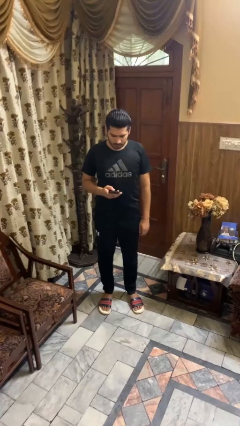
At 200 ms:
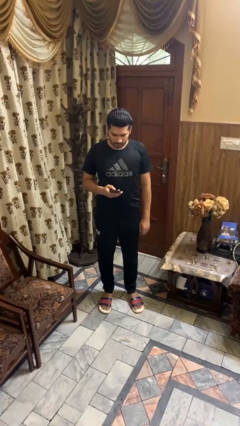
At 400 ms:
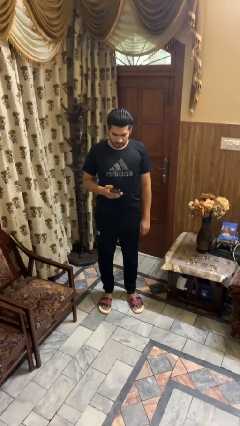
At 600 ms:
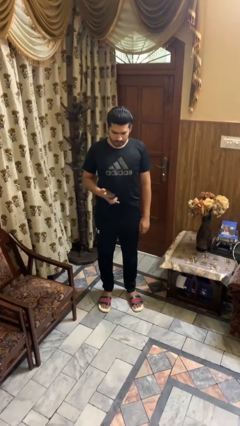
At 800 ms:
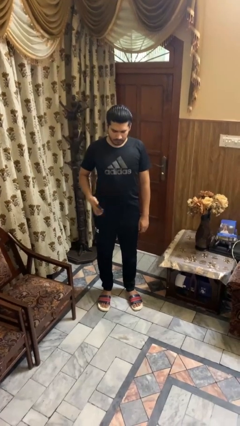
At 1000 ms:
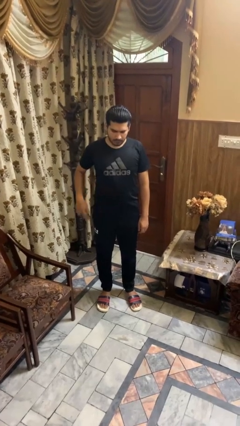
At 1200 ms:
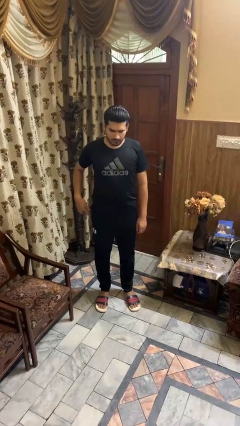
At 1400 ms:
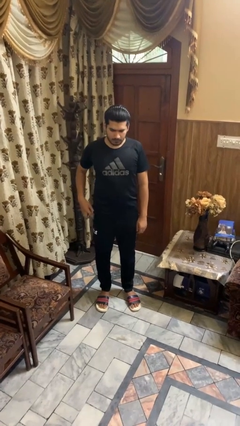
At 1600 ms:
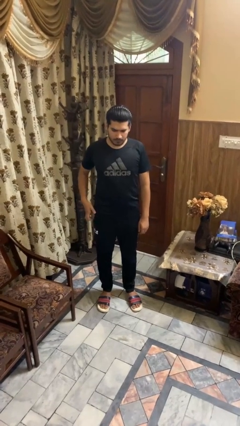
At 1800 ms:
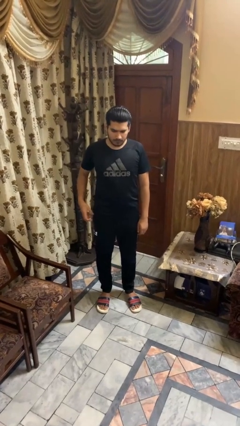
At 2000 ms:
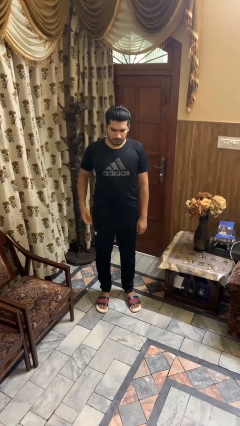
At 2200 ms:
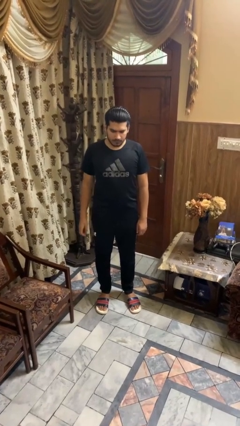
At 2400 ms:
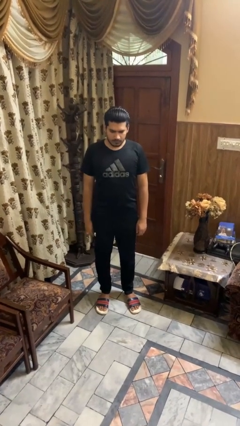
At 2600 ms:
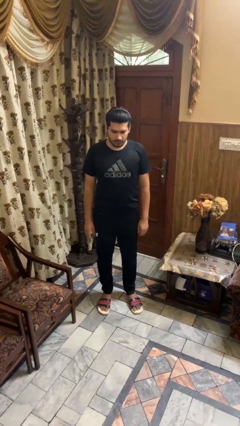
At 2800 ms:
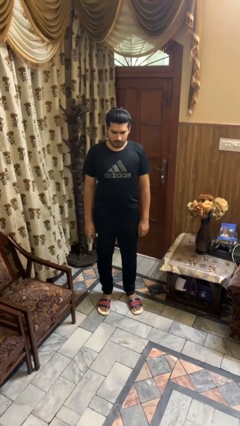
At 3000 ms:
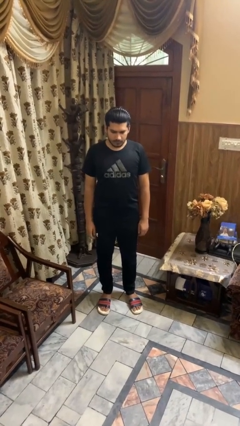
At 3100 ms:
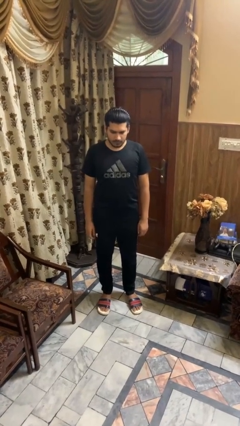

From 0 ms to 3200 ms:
person puts phone into pocket

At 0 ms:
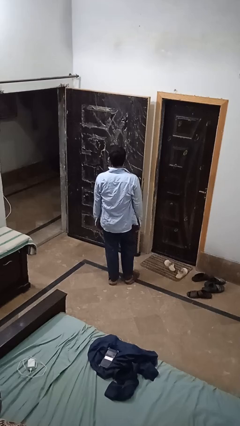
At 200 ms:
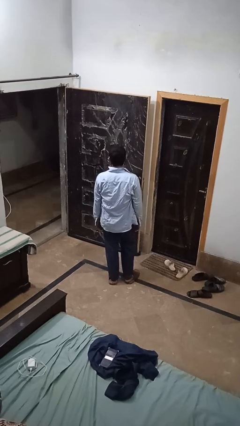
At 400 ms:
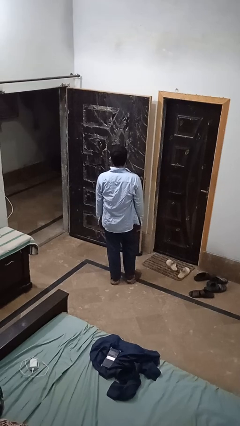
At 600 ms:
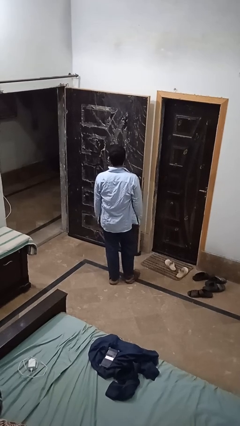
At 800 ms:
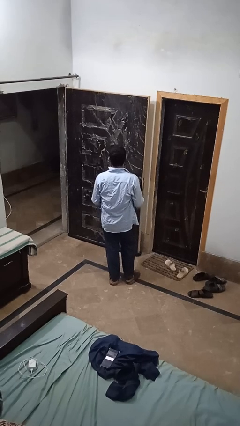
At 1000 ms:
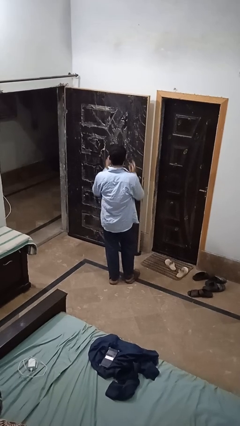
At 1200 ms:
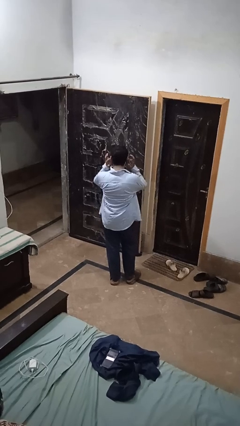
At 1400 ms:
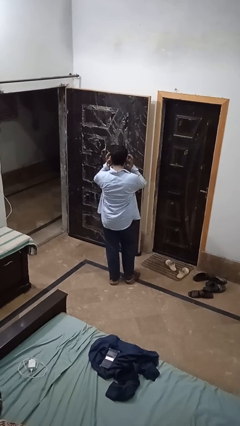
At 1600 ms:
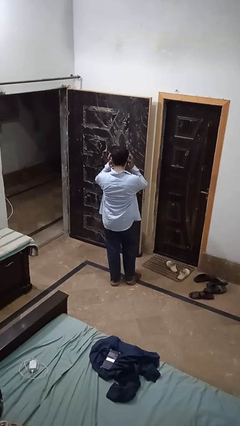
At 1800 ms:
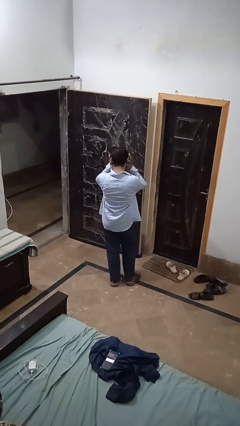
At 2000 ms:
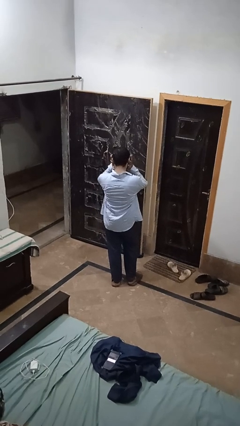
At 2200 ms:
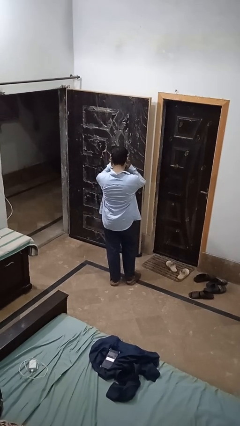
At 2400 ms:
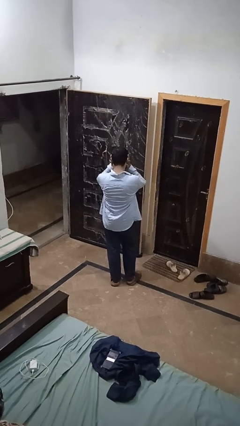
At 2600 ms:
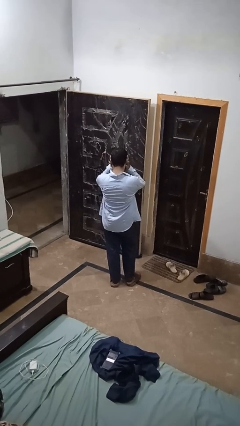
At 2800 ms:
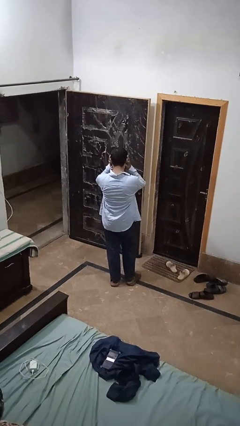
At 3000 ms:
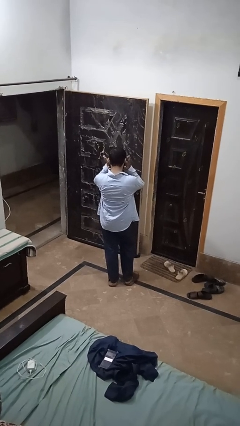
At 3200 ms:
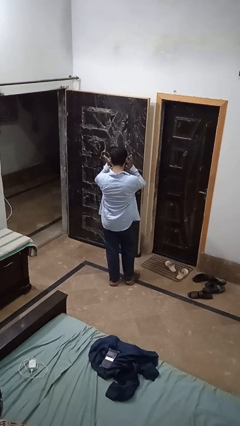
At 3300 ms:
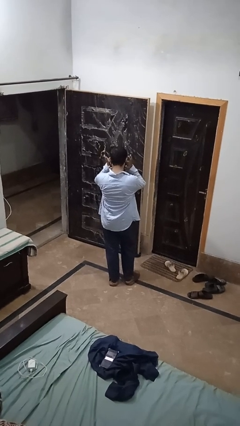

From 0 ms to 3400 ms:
person puts fingers in ear

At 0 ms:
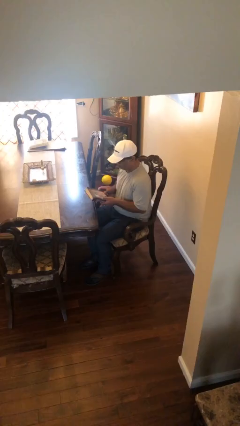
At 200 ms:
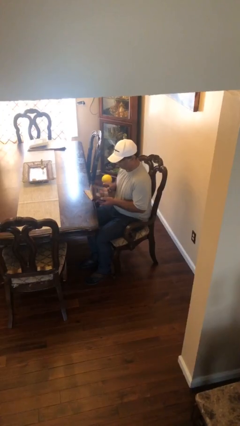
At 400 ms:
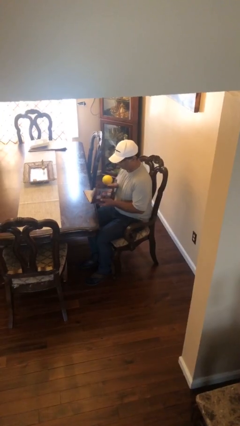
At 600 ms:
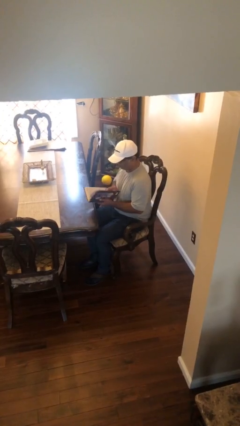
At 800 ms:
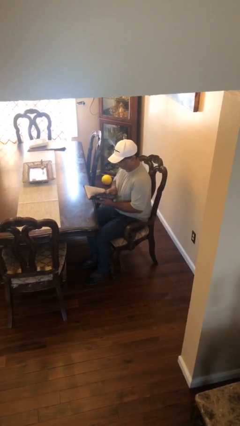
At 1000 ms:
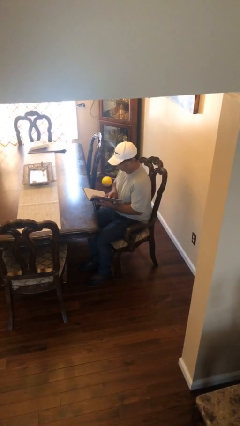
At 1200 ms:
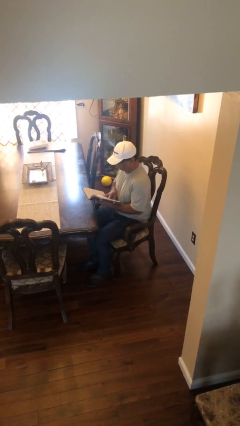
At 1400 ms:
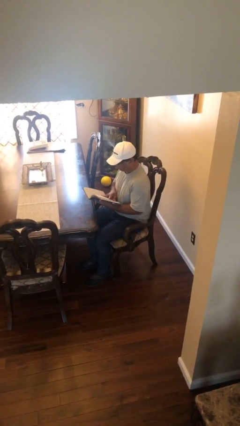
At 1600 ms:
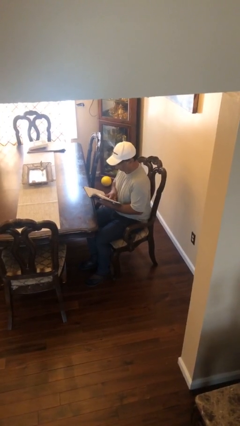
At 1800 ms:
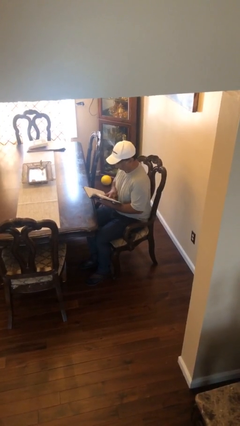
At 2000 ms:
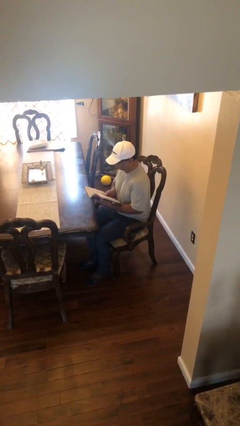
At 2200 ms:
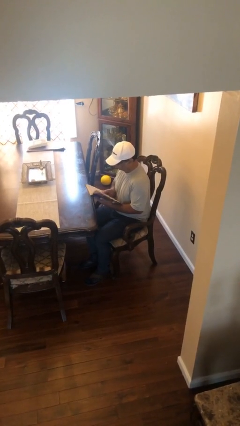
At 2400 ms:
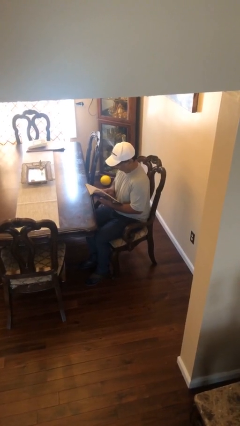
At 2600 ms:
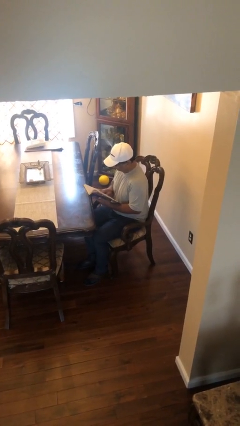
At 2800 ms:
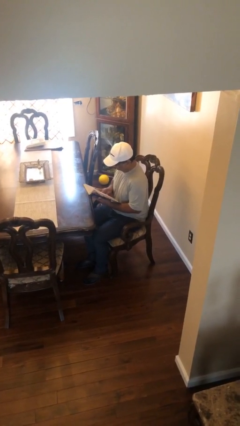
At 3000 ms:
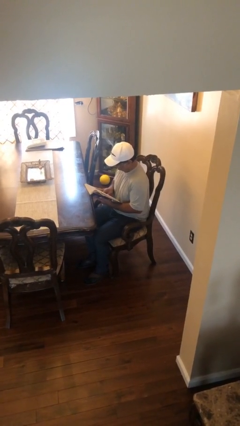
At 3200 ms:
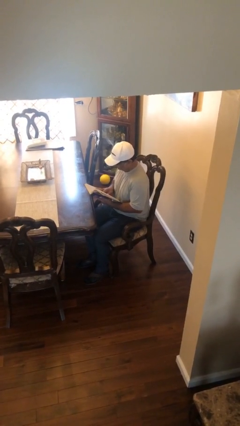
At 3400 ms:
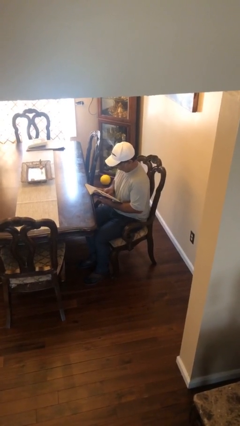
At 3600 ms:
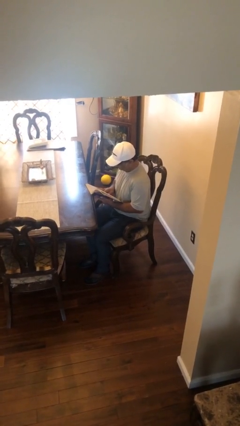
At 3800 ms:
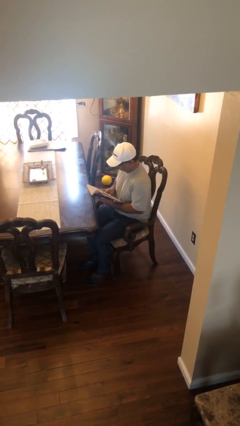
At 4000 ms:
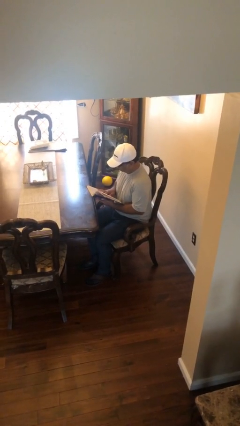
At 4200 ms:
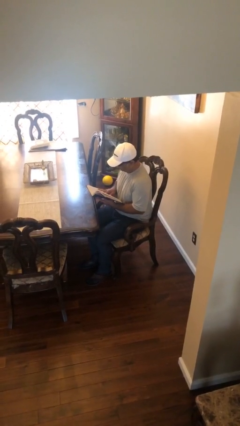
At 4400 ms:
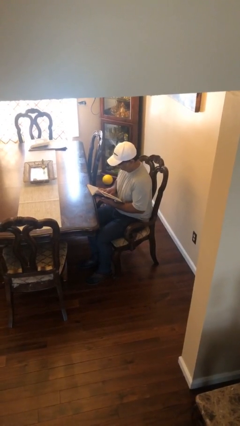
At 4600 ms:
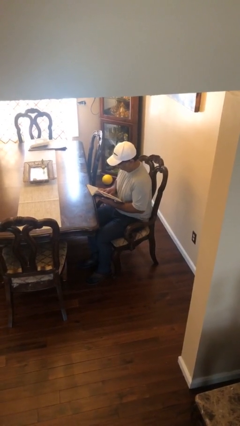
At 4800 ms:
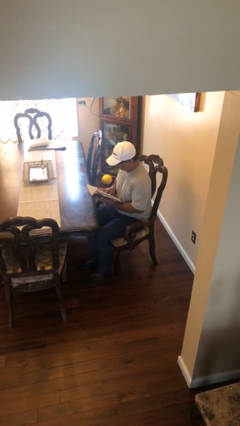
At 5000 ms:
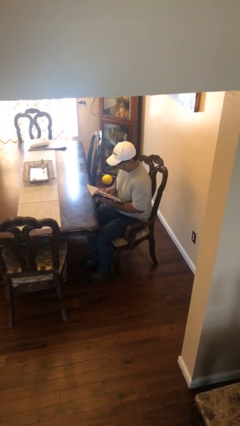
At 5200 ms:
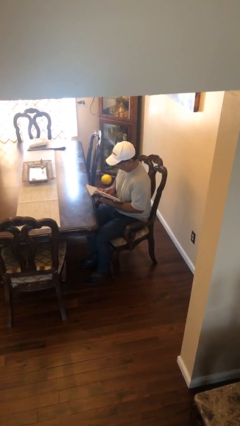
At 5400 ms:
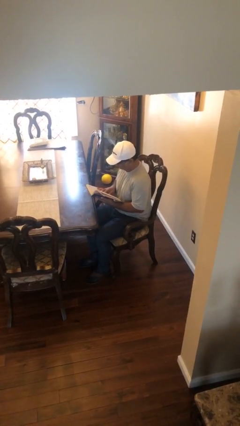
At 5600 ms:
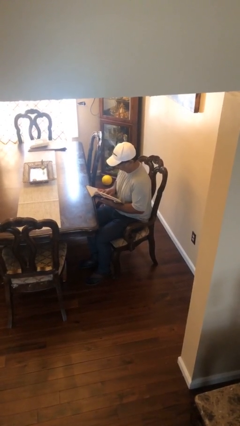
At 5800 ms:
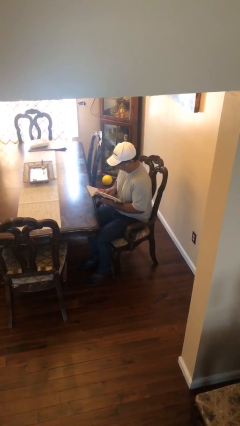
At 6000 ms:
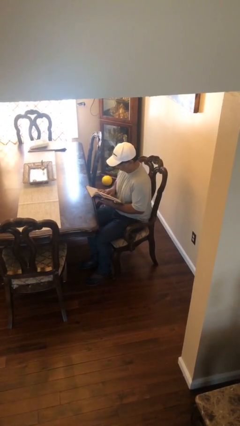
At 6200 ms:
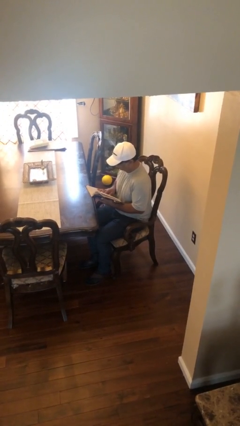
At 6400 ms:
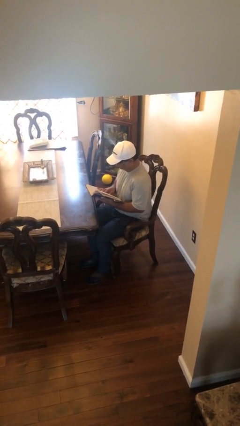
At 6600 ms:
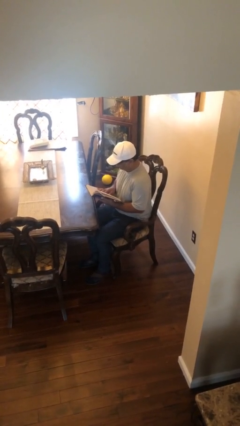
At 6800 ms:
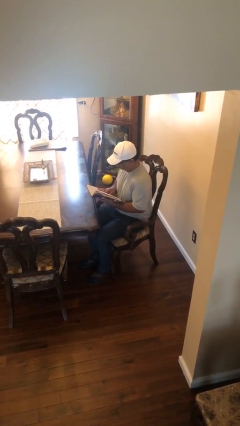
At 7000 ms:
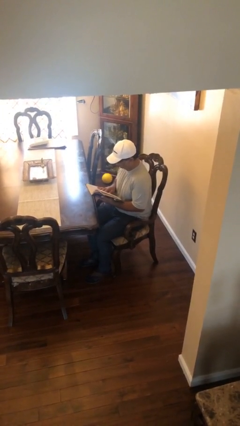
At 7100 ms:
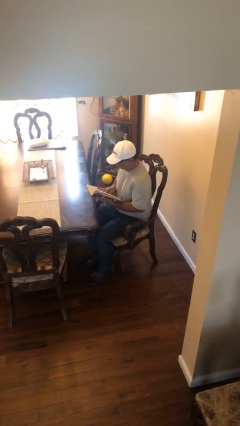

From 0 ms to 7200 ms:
person reads document

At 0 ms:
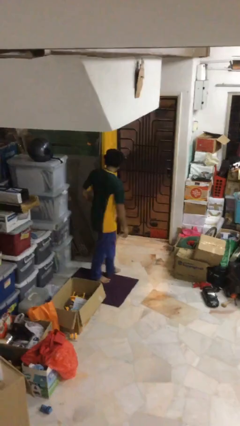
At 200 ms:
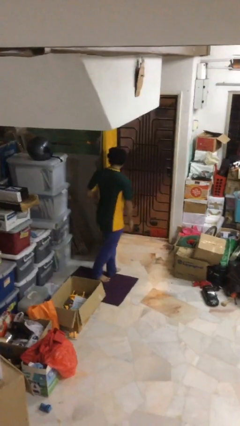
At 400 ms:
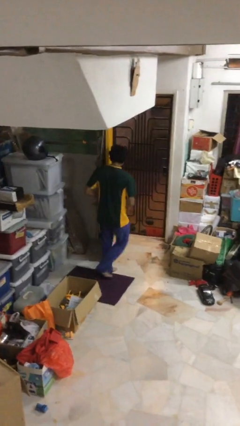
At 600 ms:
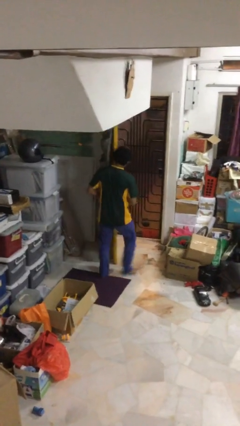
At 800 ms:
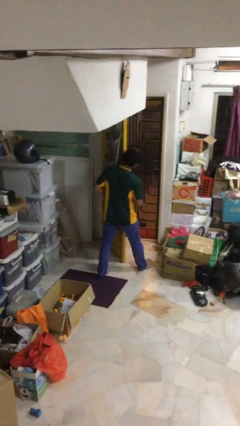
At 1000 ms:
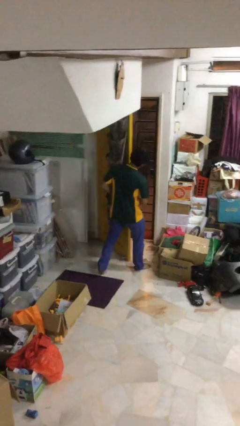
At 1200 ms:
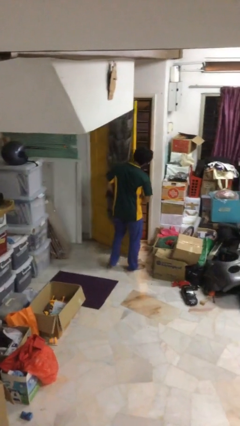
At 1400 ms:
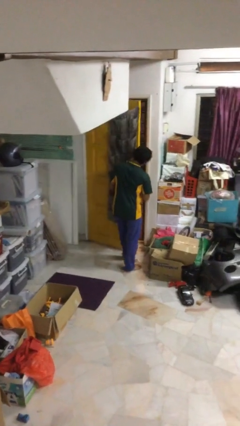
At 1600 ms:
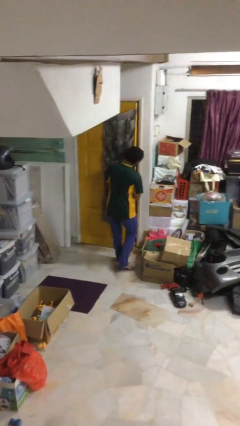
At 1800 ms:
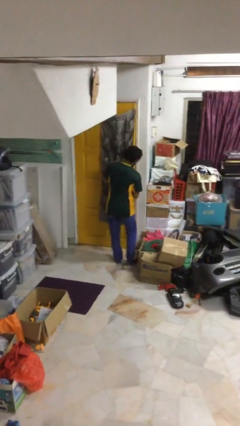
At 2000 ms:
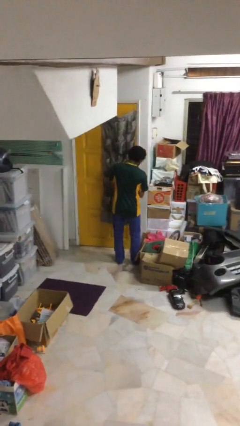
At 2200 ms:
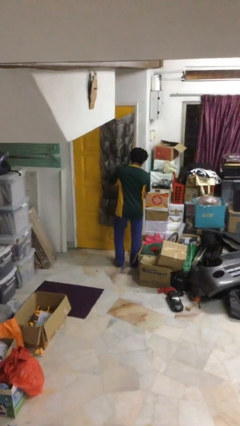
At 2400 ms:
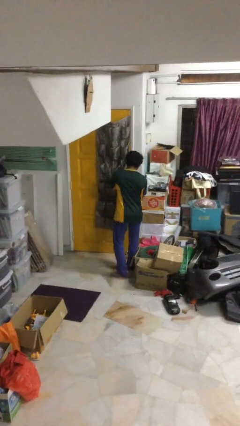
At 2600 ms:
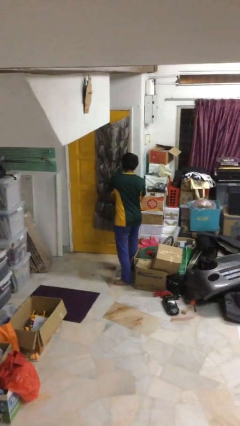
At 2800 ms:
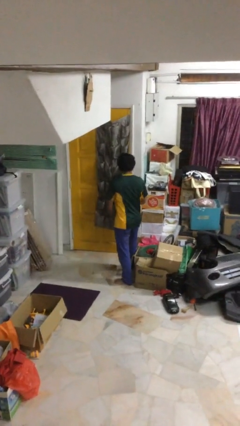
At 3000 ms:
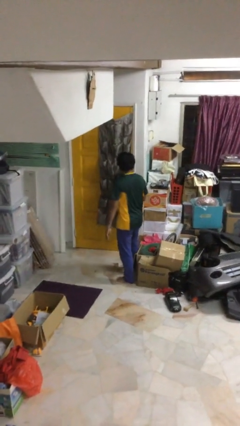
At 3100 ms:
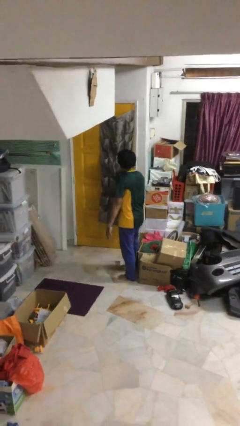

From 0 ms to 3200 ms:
person closes facility door

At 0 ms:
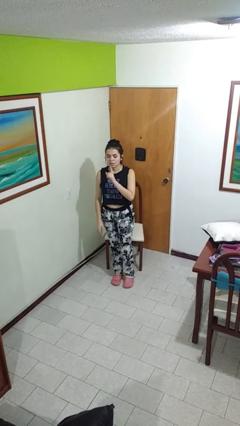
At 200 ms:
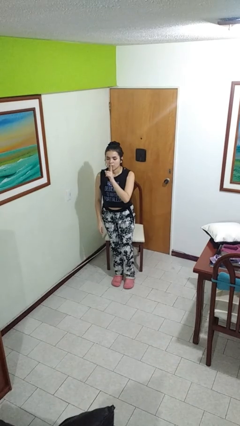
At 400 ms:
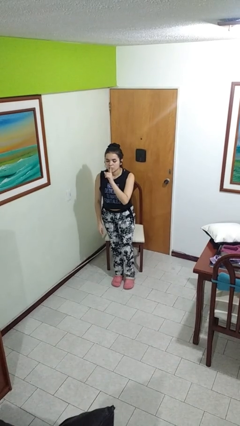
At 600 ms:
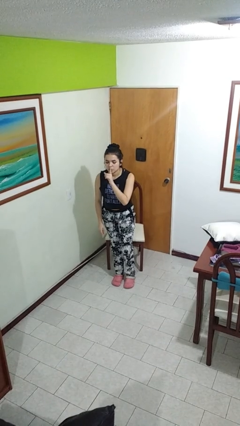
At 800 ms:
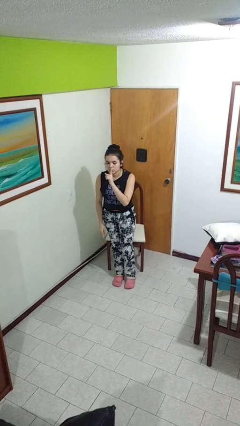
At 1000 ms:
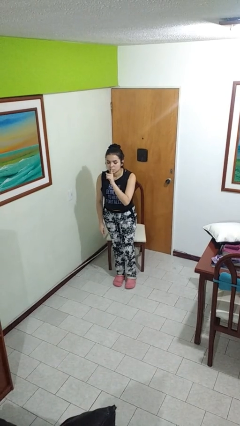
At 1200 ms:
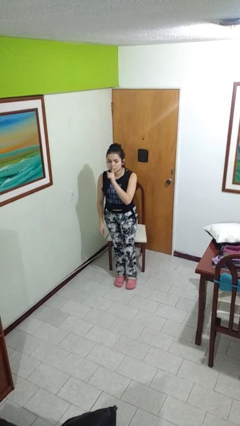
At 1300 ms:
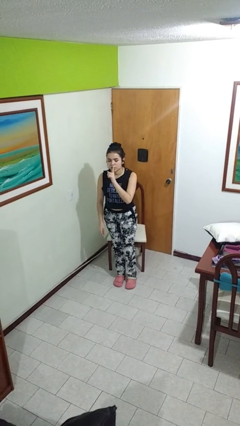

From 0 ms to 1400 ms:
person gestures be quiet
